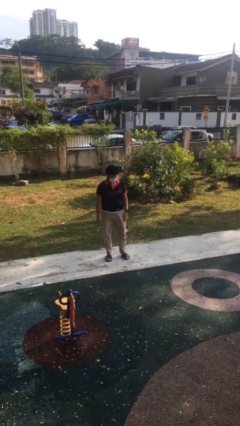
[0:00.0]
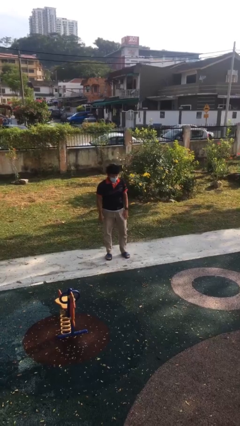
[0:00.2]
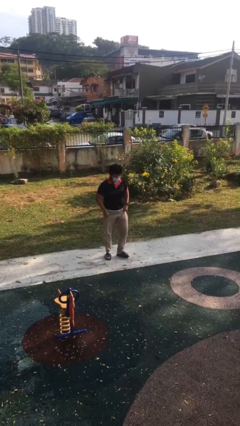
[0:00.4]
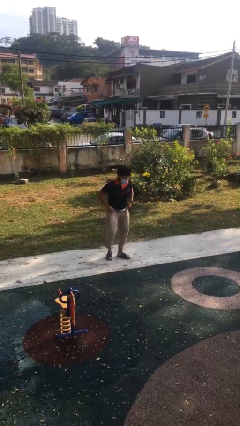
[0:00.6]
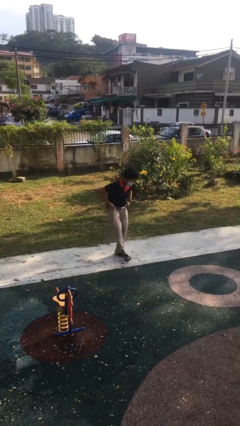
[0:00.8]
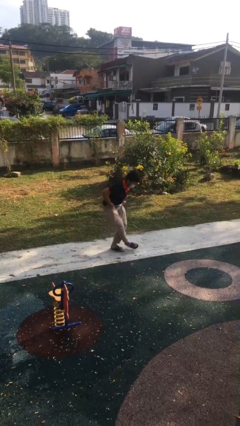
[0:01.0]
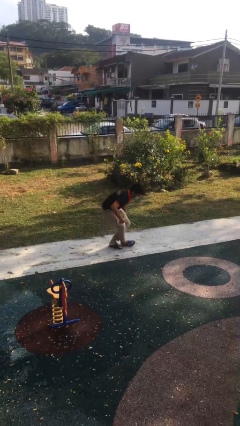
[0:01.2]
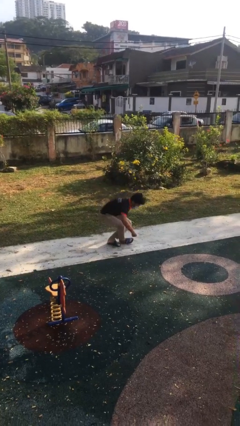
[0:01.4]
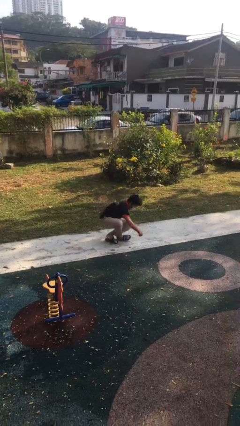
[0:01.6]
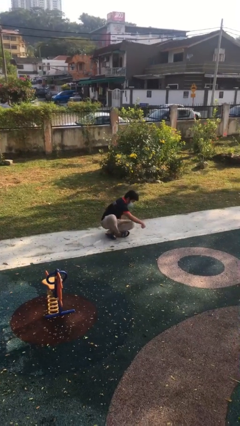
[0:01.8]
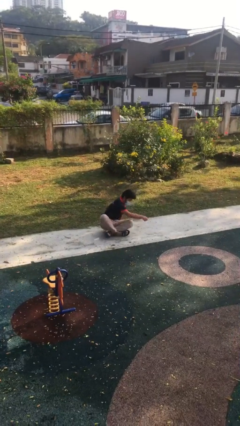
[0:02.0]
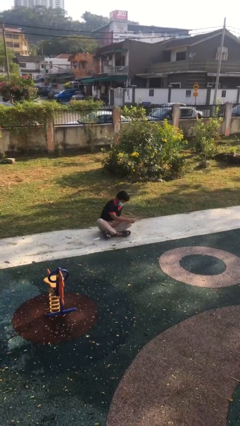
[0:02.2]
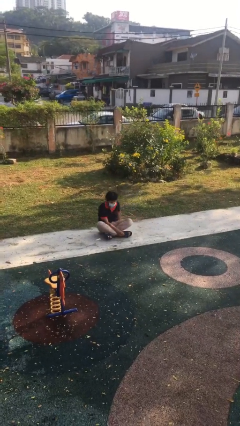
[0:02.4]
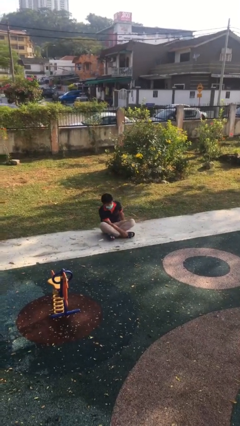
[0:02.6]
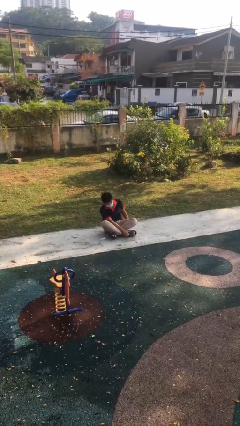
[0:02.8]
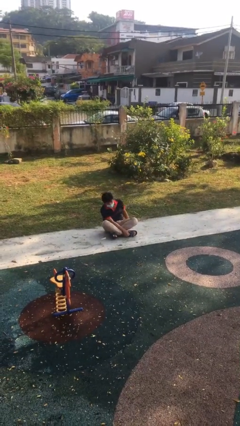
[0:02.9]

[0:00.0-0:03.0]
person sits crisscross

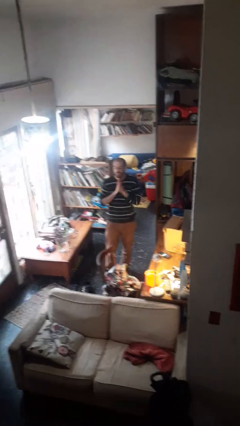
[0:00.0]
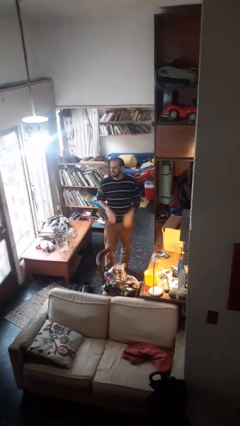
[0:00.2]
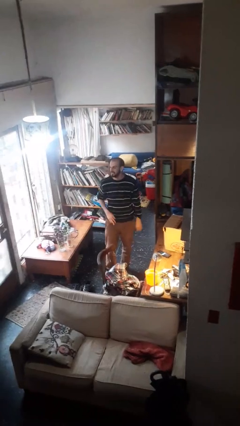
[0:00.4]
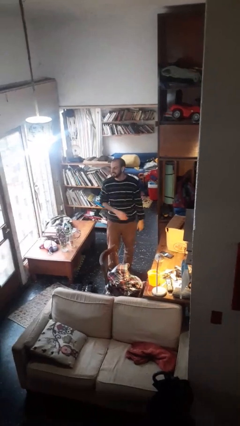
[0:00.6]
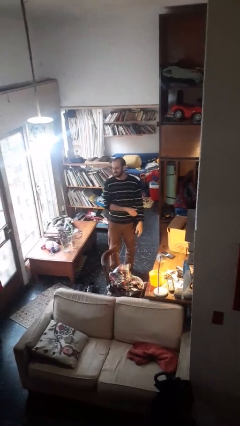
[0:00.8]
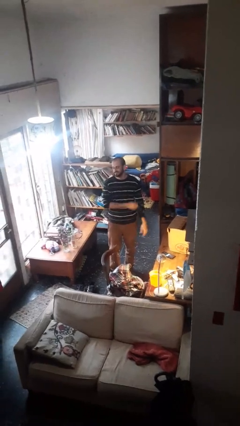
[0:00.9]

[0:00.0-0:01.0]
person covers face with hands

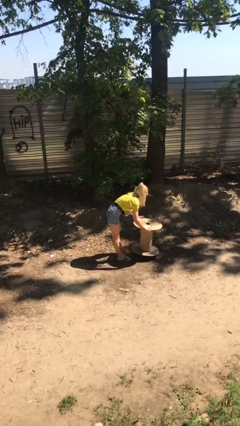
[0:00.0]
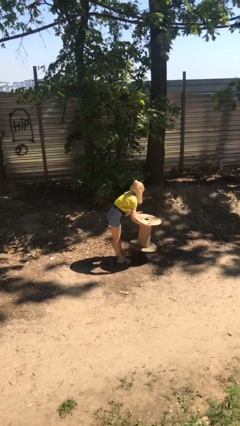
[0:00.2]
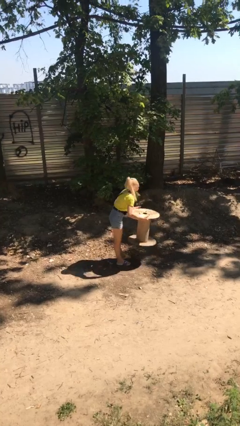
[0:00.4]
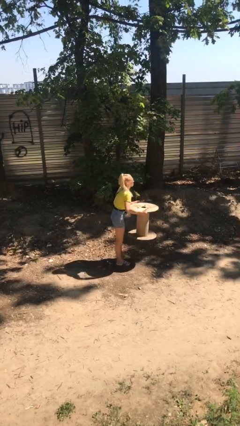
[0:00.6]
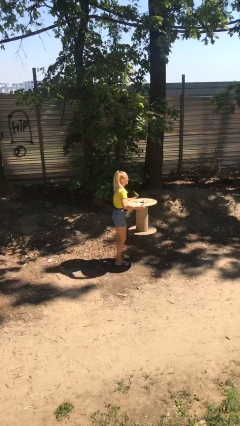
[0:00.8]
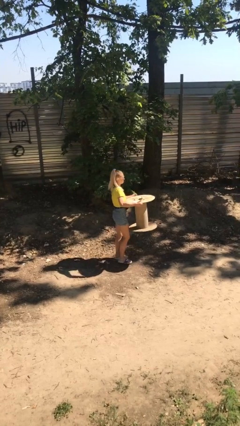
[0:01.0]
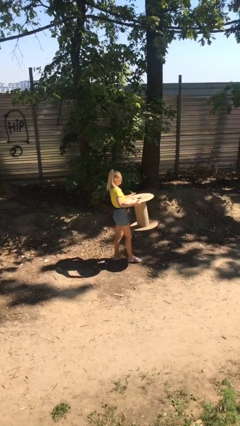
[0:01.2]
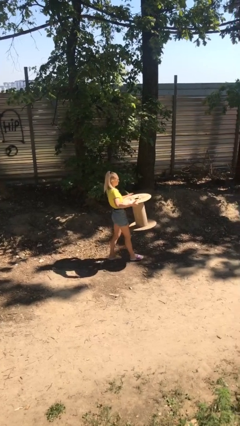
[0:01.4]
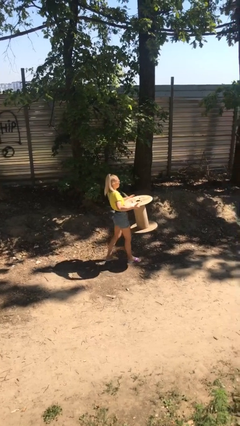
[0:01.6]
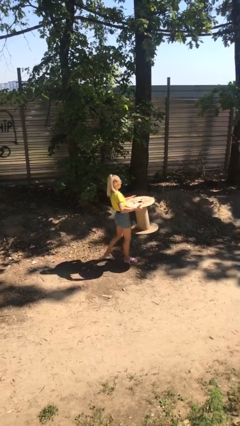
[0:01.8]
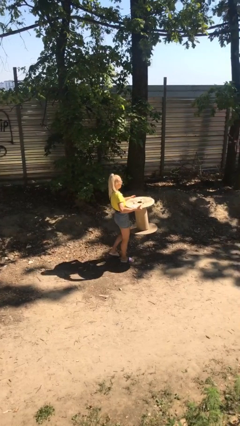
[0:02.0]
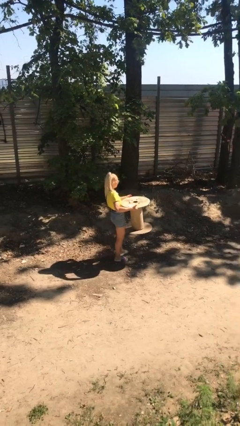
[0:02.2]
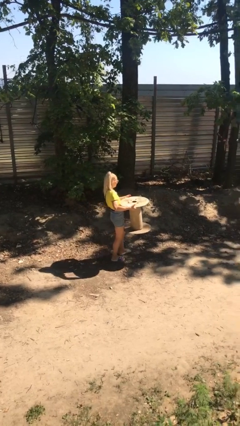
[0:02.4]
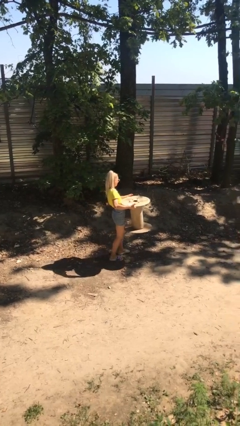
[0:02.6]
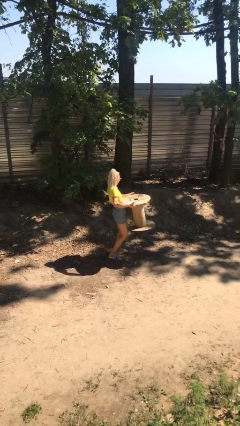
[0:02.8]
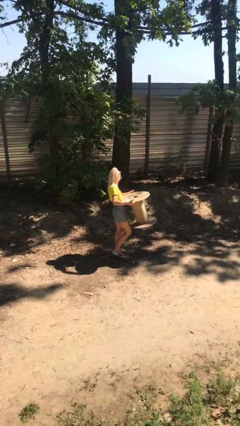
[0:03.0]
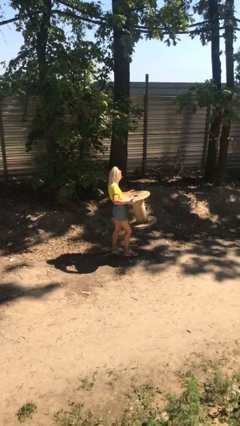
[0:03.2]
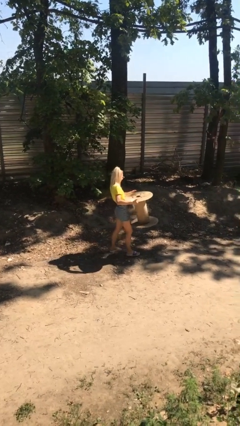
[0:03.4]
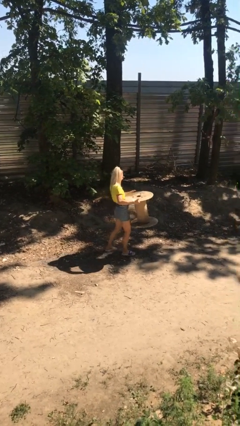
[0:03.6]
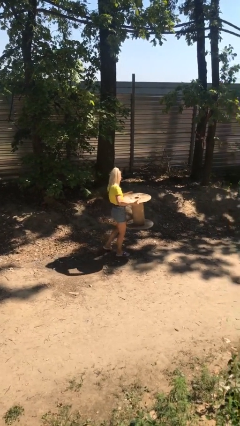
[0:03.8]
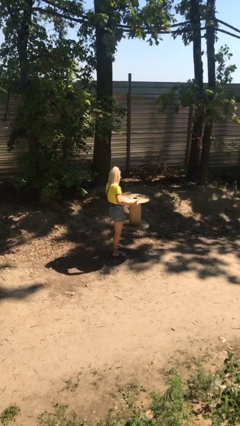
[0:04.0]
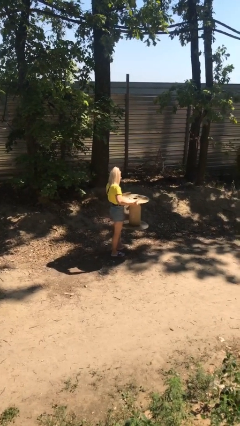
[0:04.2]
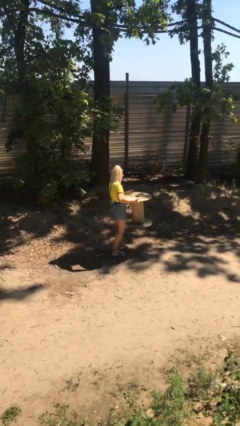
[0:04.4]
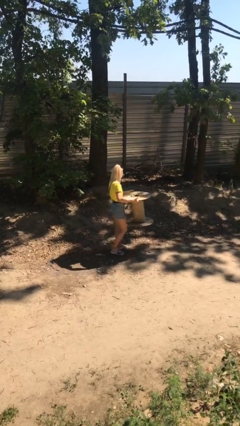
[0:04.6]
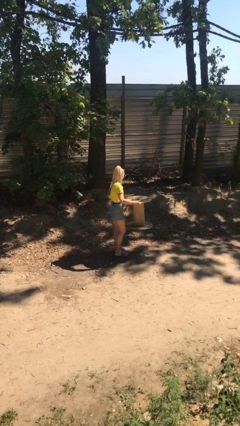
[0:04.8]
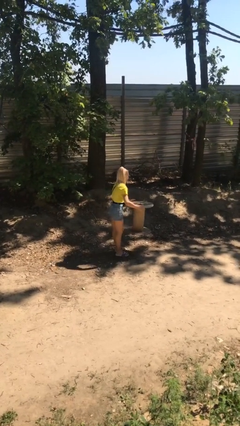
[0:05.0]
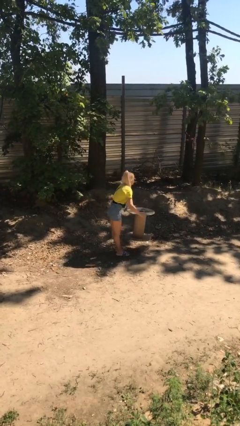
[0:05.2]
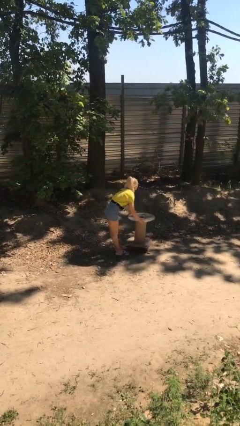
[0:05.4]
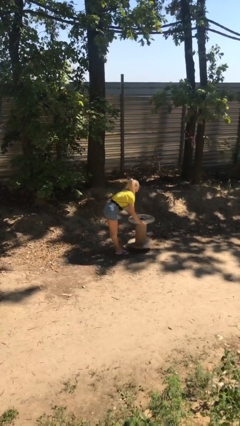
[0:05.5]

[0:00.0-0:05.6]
person carries heavy object

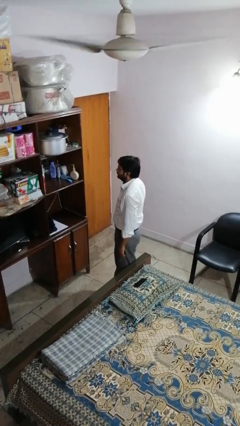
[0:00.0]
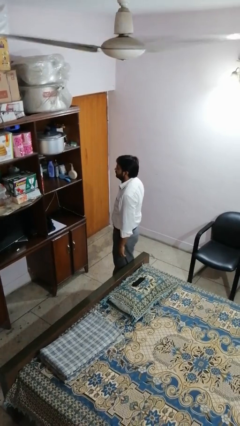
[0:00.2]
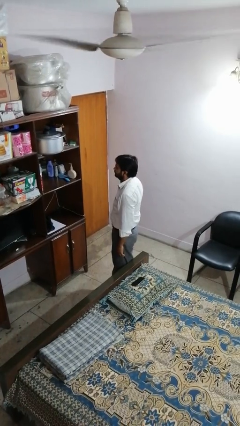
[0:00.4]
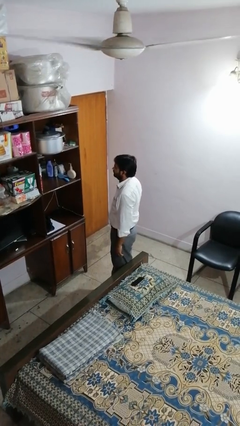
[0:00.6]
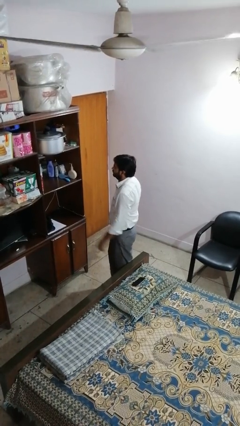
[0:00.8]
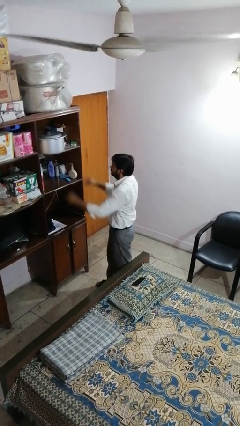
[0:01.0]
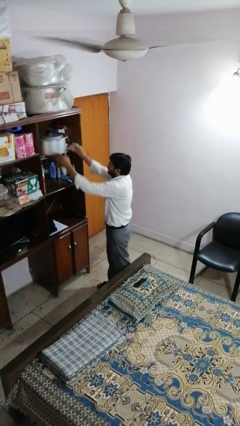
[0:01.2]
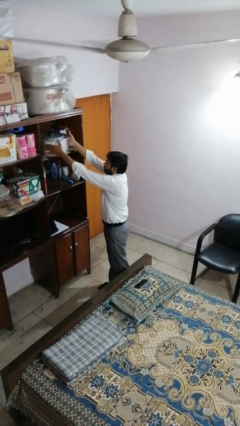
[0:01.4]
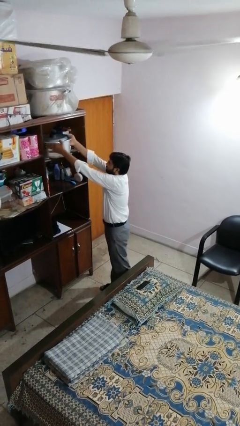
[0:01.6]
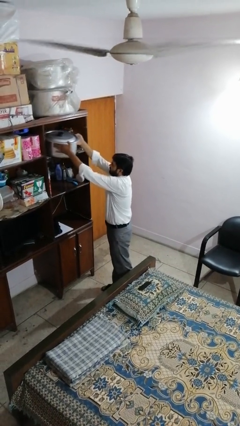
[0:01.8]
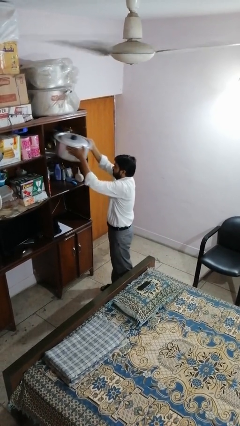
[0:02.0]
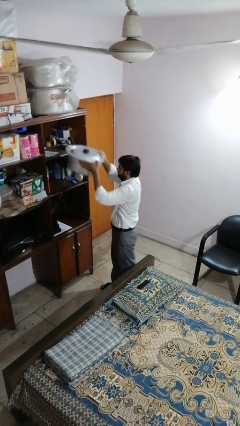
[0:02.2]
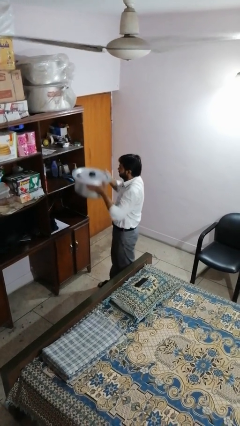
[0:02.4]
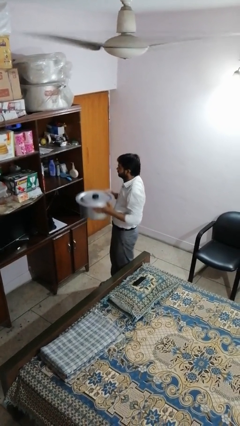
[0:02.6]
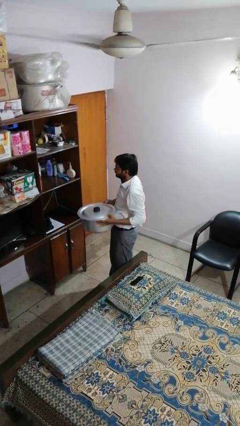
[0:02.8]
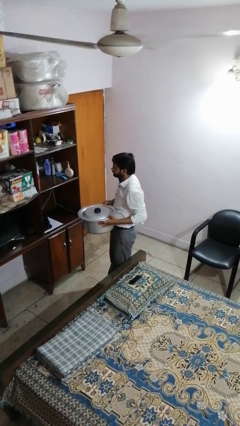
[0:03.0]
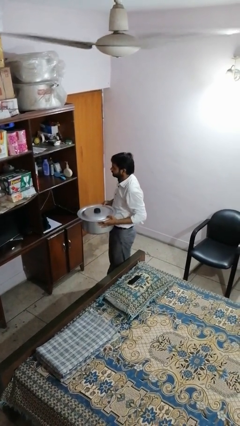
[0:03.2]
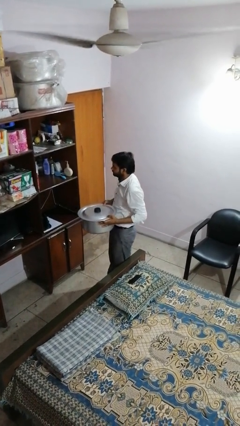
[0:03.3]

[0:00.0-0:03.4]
person picks up object from shelf

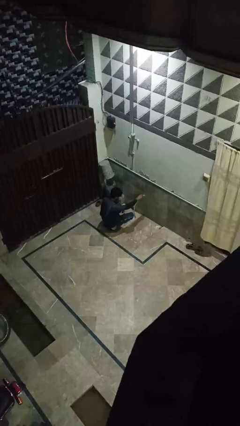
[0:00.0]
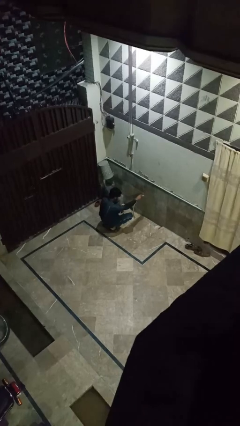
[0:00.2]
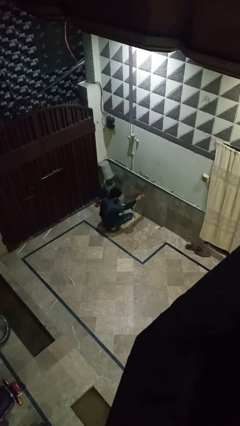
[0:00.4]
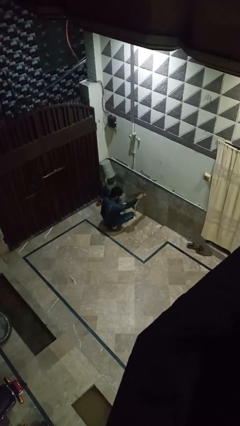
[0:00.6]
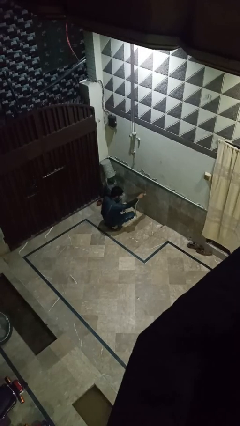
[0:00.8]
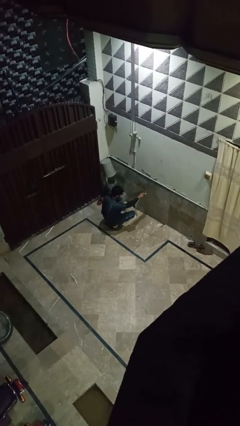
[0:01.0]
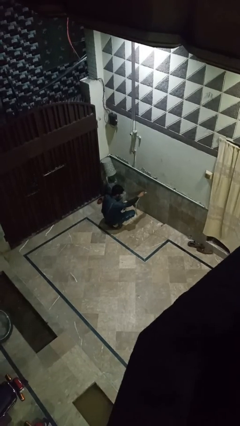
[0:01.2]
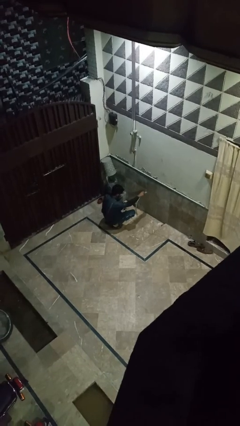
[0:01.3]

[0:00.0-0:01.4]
person turns on faucet

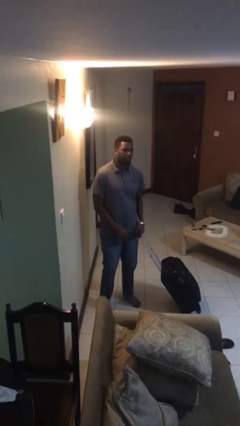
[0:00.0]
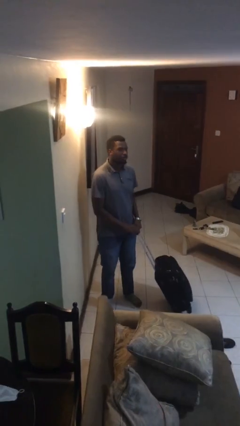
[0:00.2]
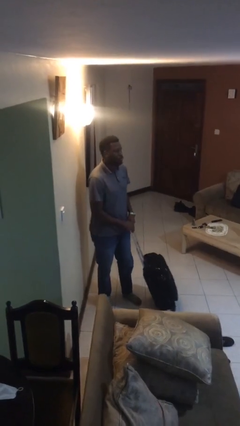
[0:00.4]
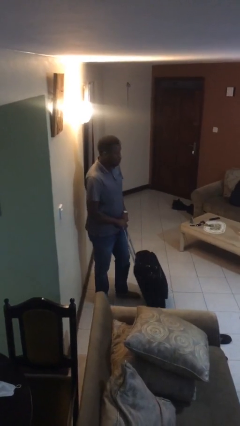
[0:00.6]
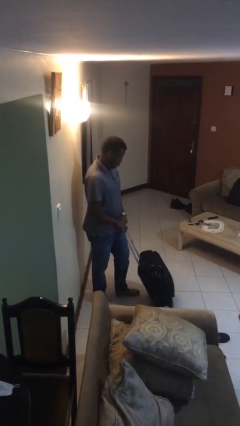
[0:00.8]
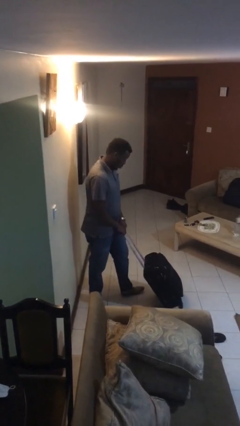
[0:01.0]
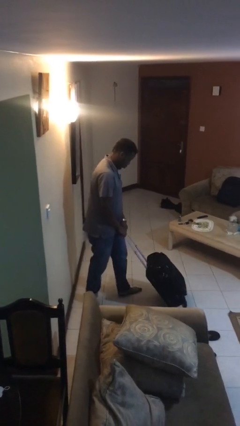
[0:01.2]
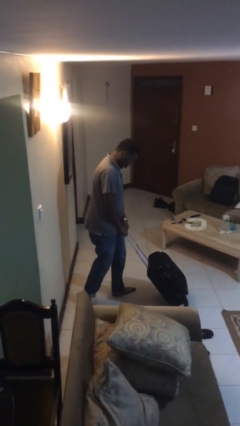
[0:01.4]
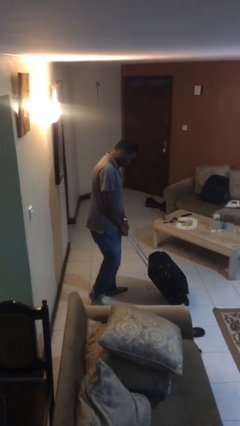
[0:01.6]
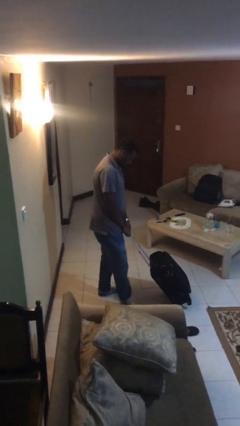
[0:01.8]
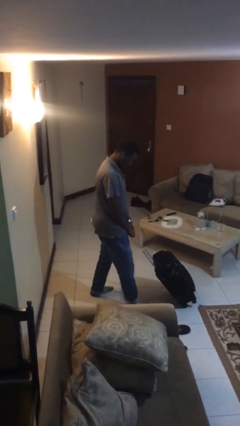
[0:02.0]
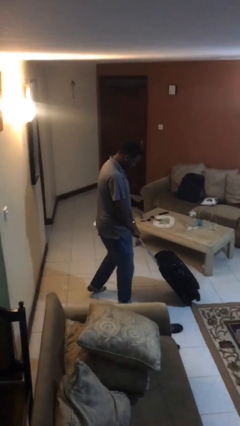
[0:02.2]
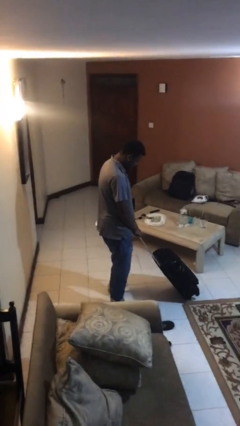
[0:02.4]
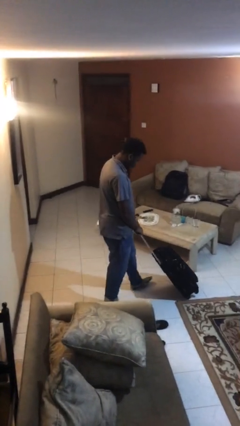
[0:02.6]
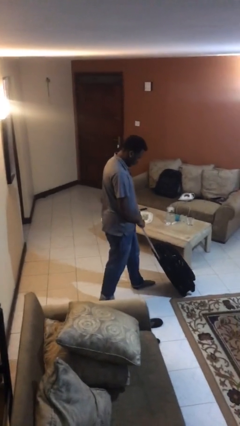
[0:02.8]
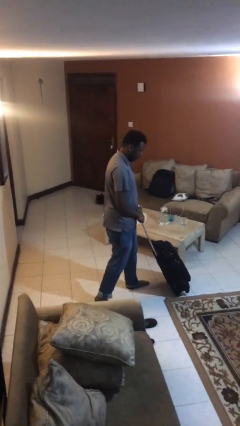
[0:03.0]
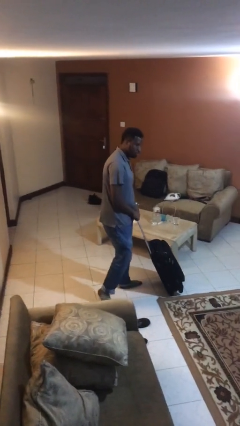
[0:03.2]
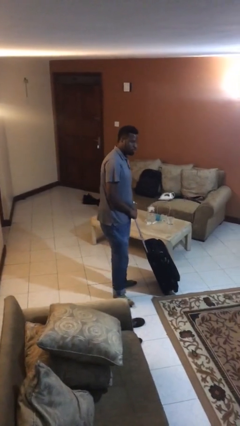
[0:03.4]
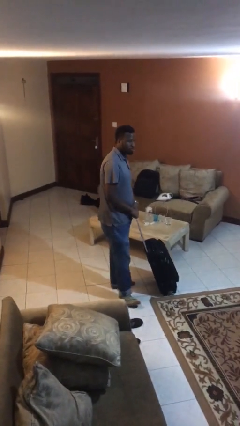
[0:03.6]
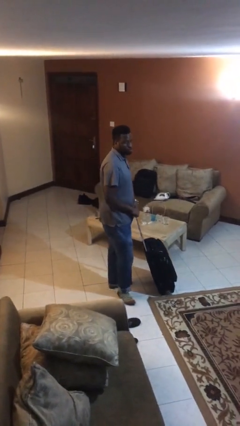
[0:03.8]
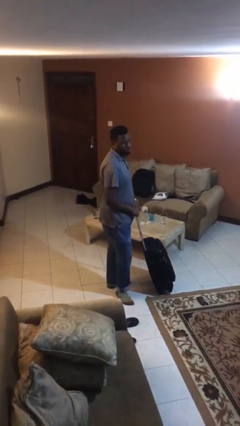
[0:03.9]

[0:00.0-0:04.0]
person pushes wheeled cart
